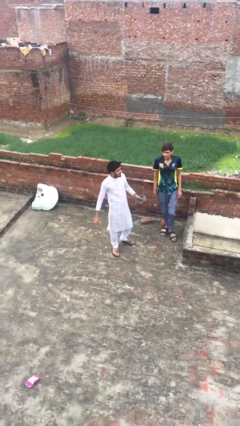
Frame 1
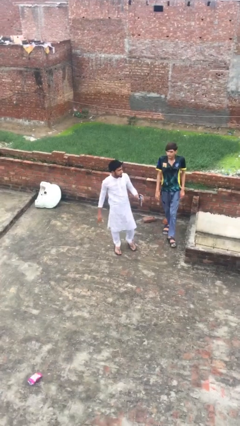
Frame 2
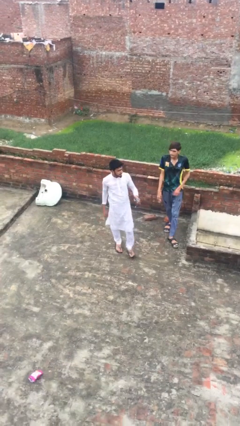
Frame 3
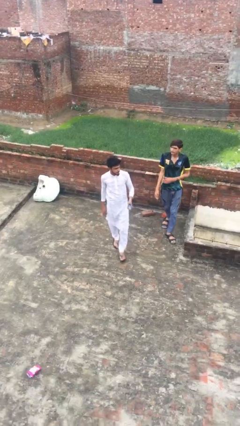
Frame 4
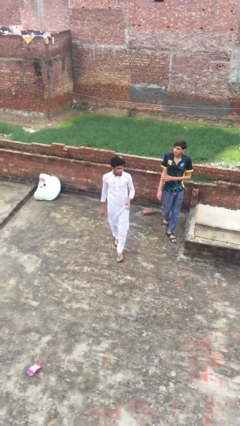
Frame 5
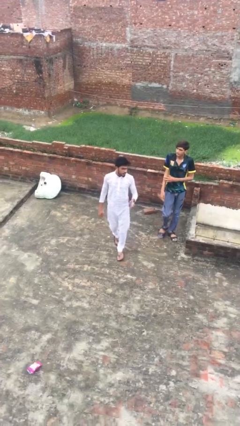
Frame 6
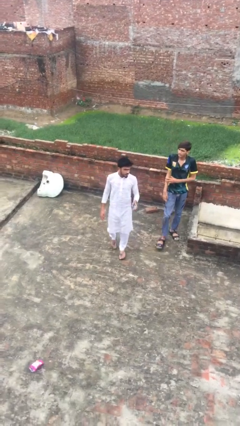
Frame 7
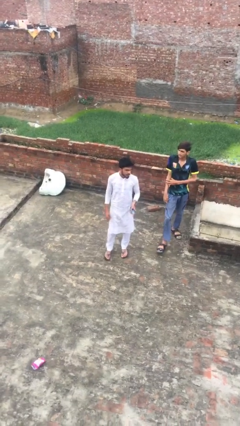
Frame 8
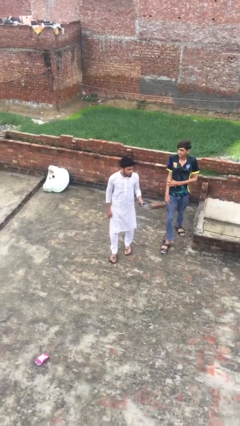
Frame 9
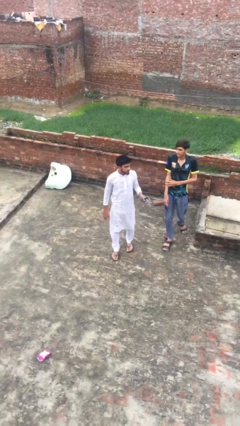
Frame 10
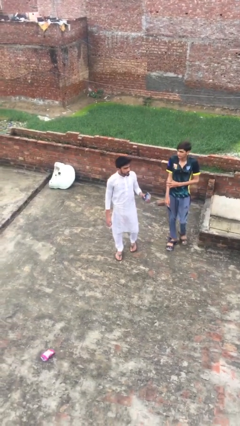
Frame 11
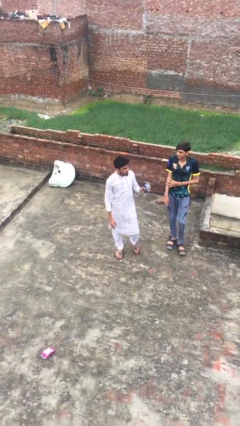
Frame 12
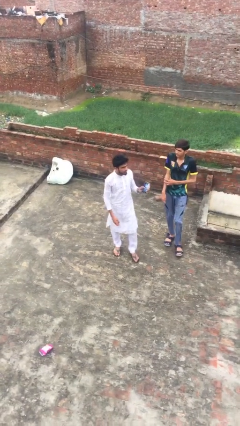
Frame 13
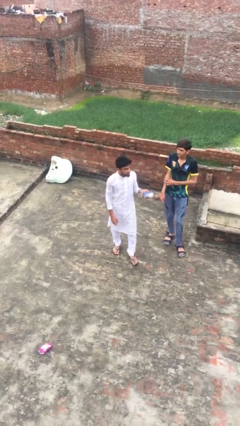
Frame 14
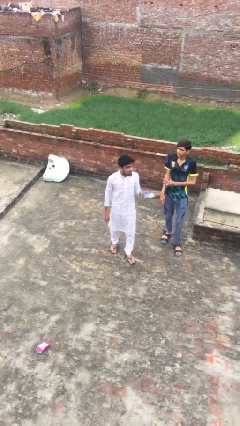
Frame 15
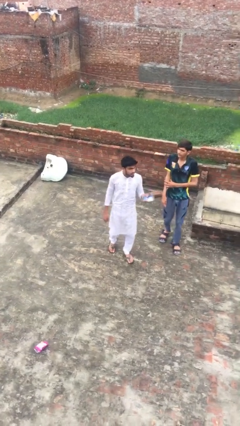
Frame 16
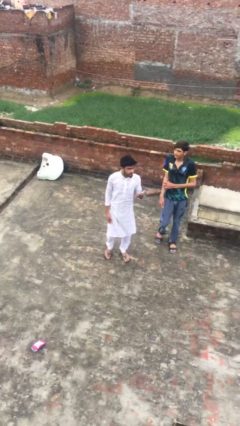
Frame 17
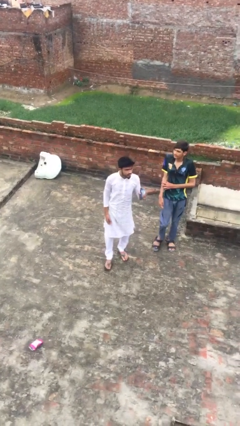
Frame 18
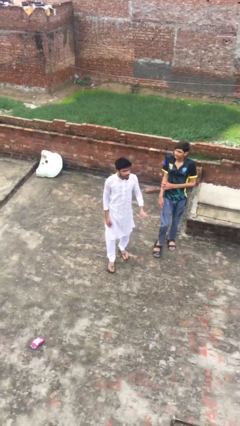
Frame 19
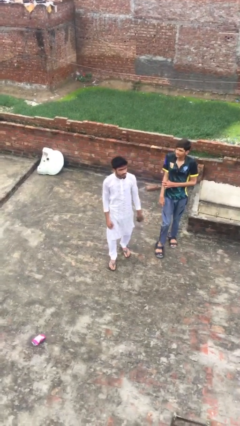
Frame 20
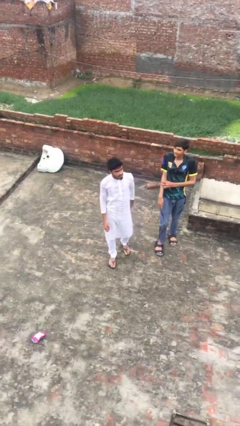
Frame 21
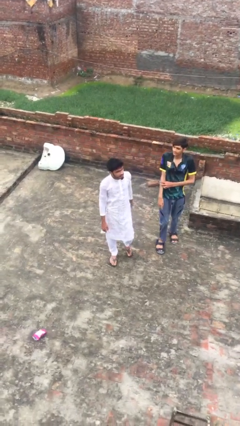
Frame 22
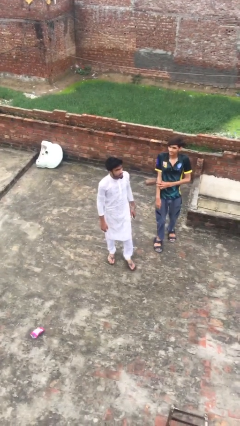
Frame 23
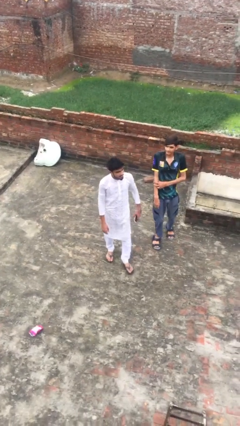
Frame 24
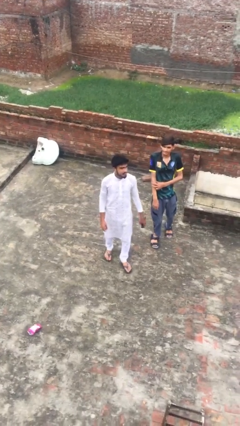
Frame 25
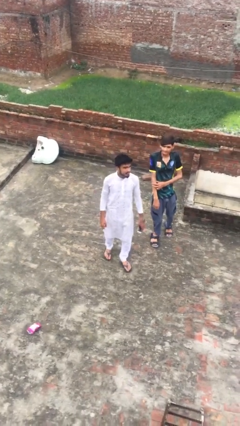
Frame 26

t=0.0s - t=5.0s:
person talks to person

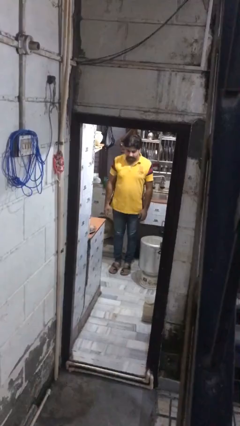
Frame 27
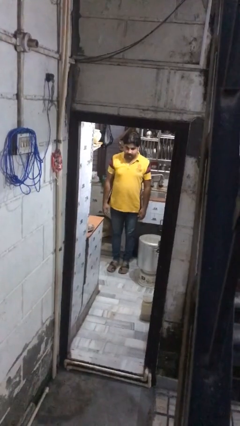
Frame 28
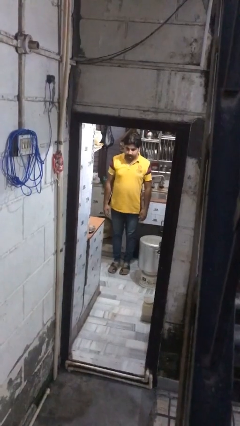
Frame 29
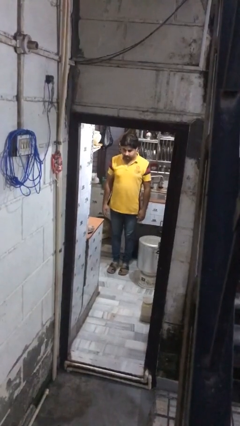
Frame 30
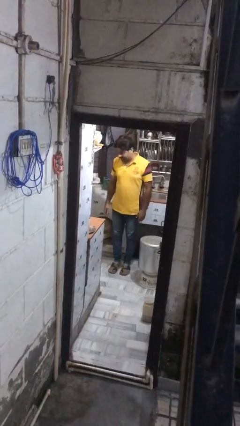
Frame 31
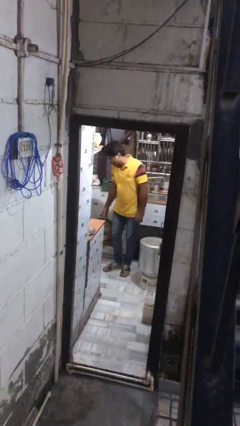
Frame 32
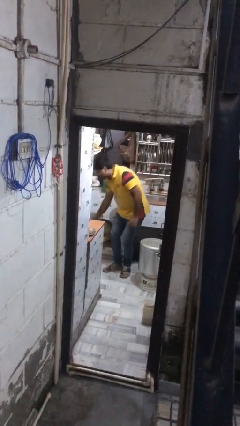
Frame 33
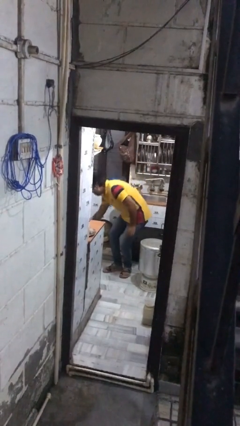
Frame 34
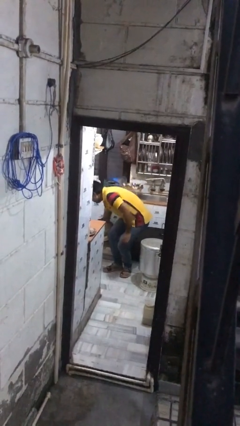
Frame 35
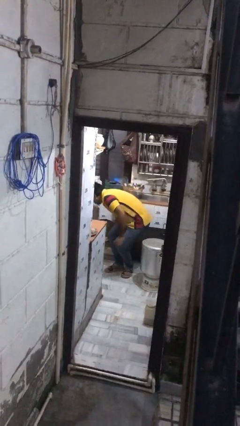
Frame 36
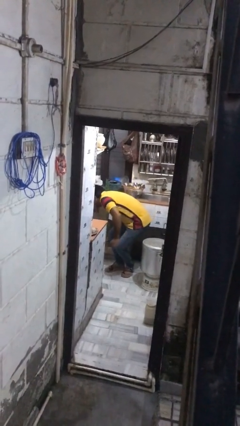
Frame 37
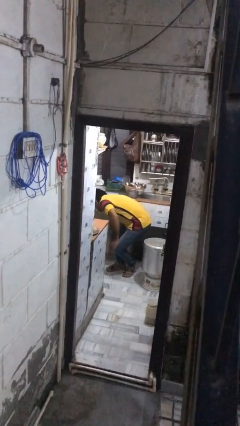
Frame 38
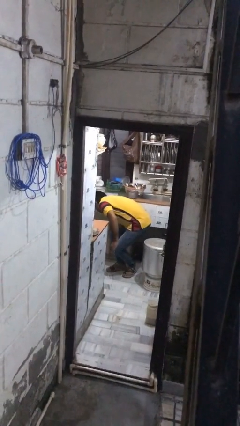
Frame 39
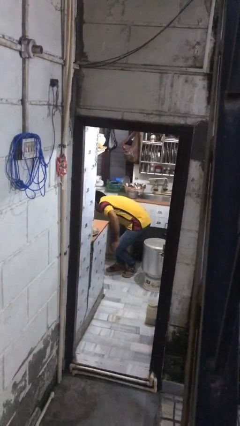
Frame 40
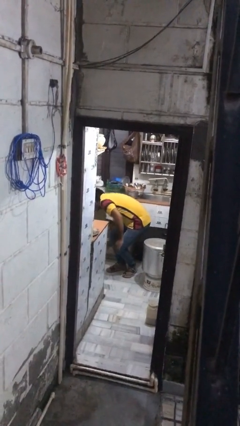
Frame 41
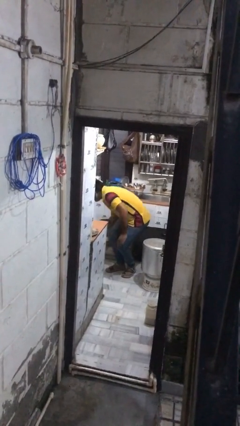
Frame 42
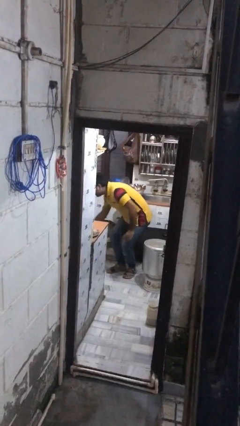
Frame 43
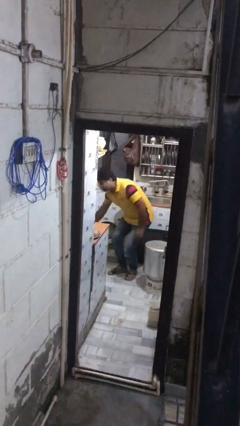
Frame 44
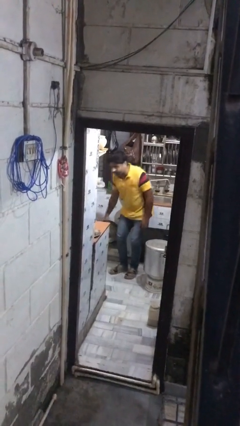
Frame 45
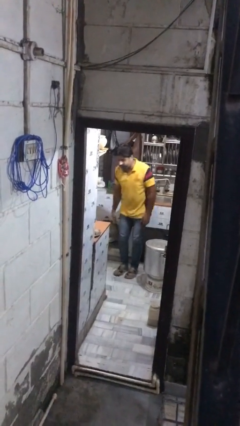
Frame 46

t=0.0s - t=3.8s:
person searches in kitchen drawer

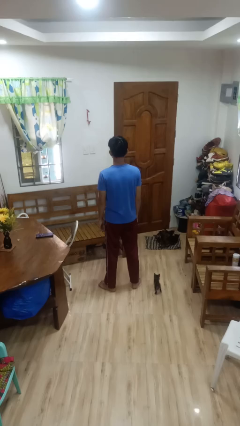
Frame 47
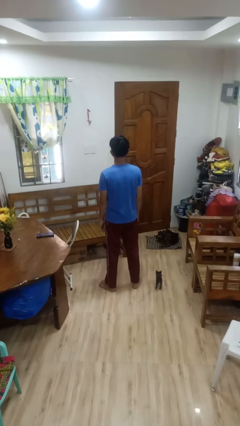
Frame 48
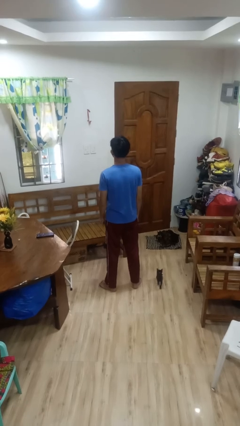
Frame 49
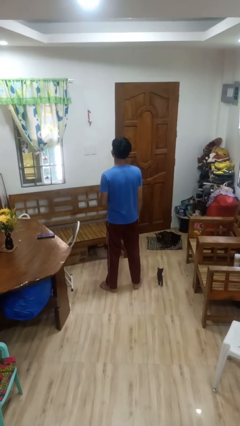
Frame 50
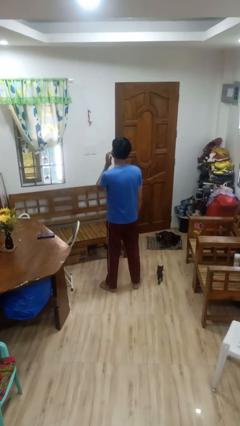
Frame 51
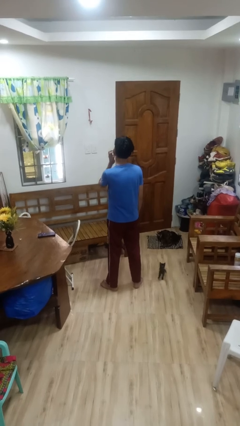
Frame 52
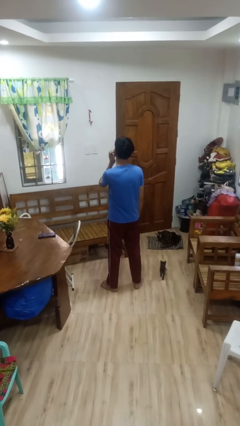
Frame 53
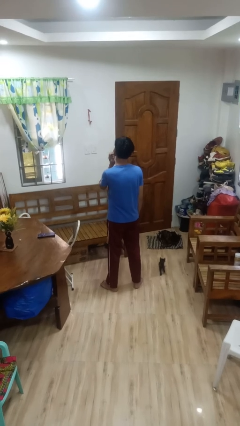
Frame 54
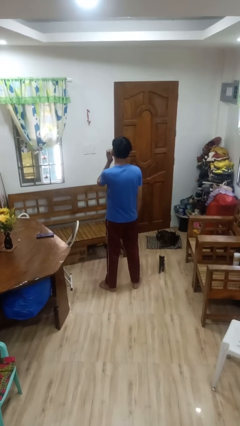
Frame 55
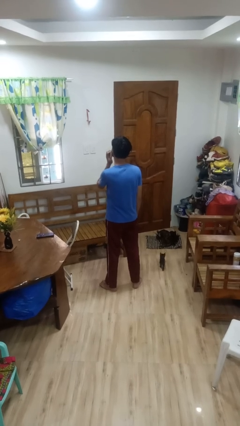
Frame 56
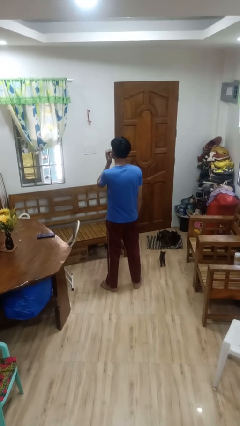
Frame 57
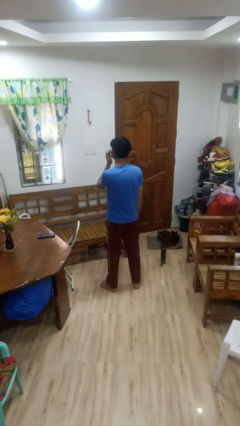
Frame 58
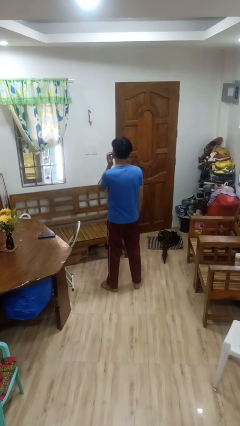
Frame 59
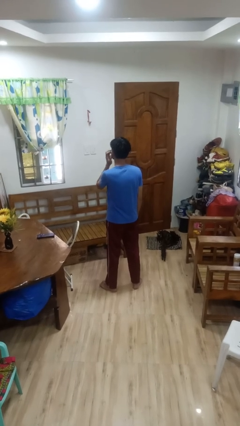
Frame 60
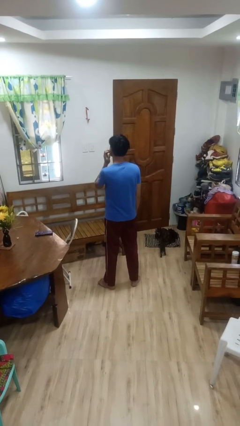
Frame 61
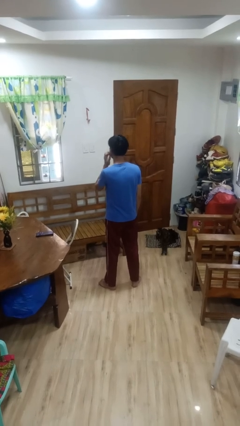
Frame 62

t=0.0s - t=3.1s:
person scratches face

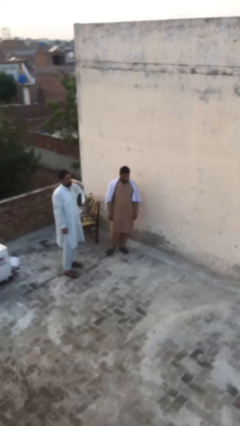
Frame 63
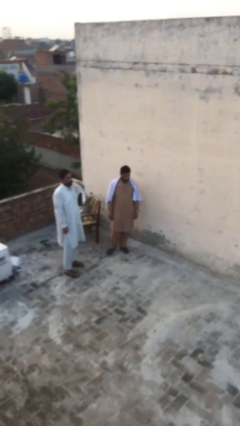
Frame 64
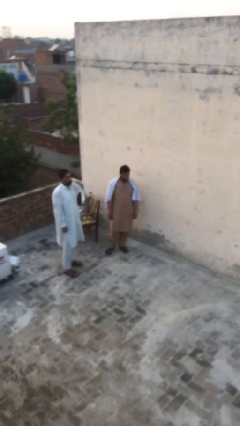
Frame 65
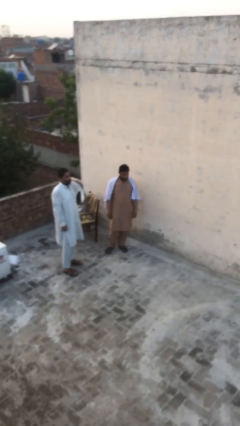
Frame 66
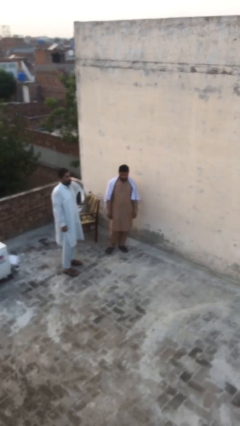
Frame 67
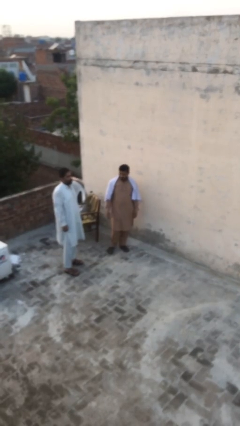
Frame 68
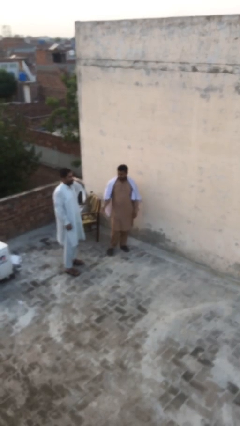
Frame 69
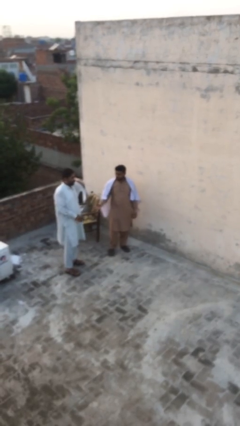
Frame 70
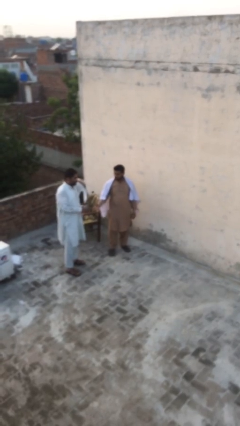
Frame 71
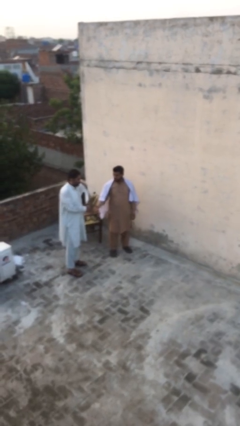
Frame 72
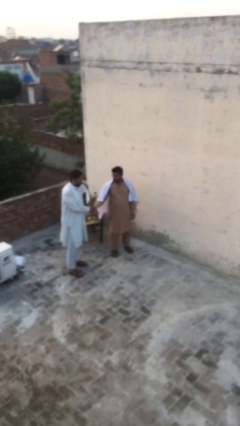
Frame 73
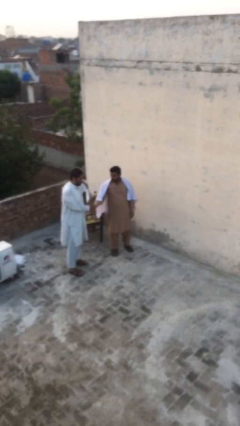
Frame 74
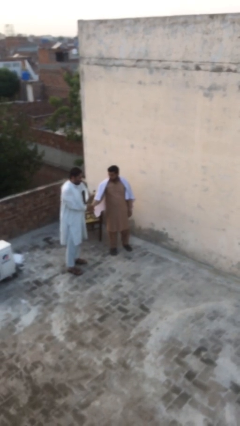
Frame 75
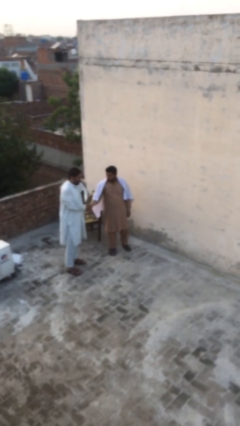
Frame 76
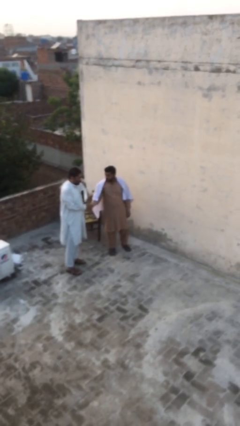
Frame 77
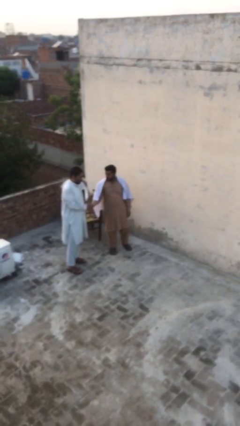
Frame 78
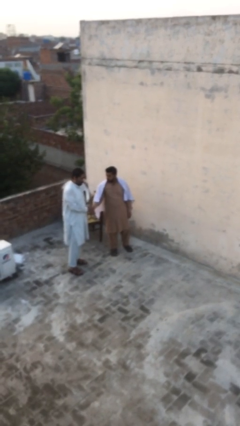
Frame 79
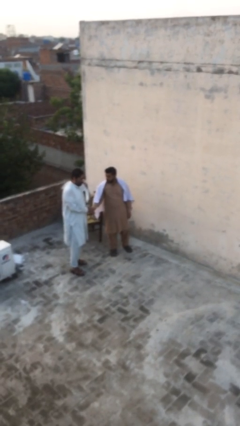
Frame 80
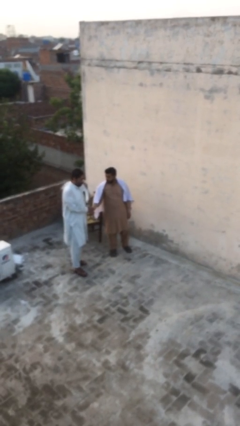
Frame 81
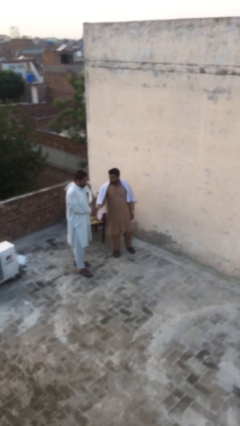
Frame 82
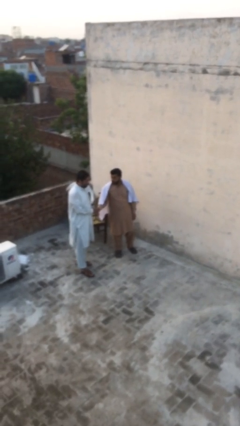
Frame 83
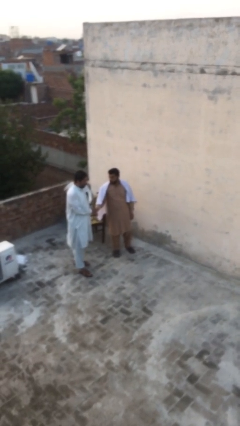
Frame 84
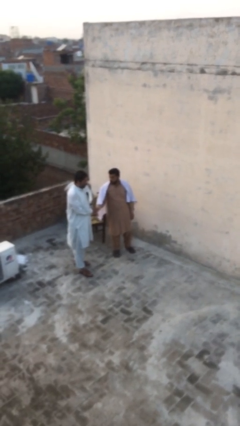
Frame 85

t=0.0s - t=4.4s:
person shakes hand

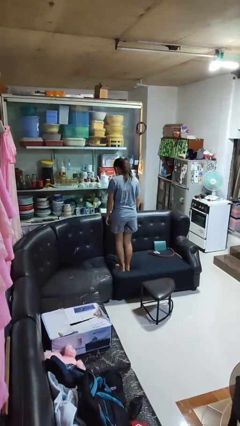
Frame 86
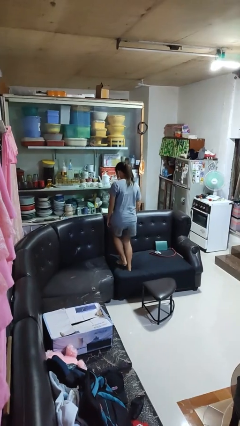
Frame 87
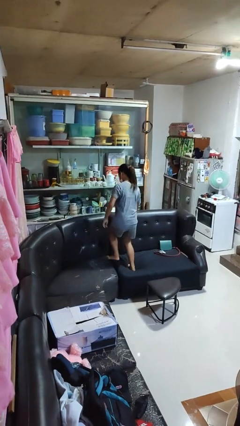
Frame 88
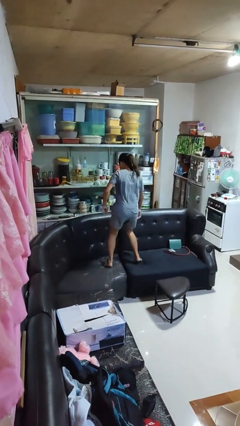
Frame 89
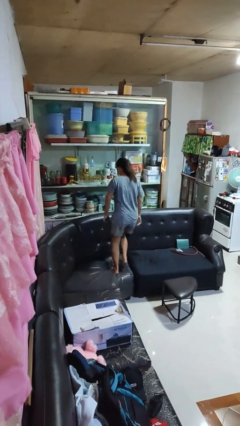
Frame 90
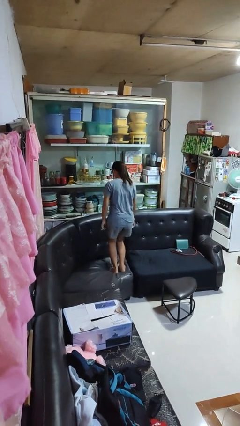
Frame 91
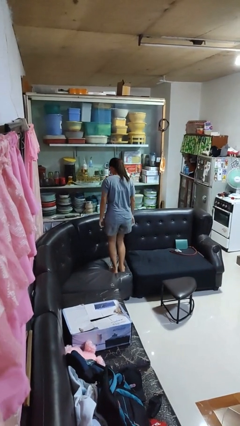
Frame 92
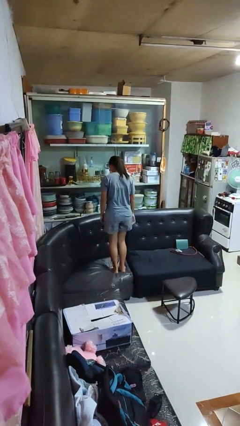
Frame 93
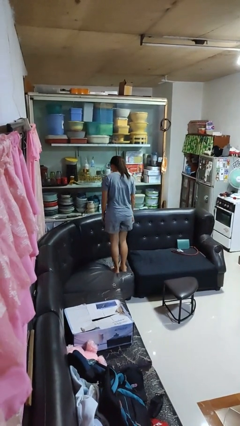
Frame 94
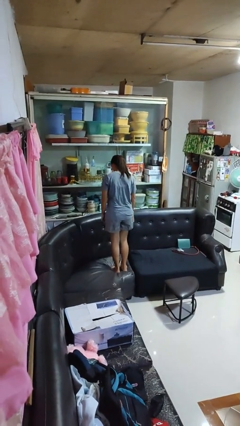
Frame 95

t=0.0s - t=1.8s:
person jumps on couch
